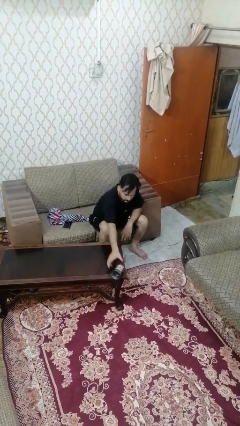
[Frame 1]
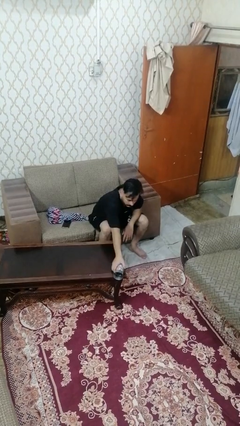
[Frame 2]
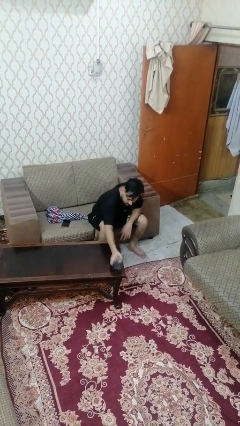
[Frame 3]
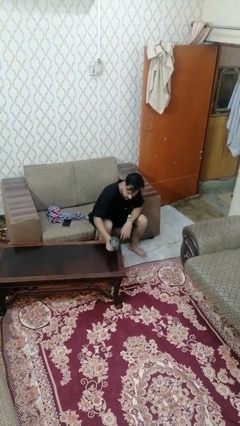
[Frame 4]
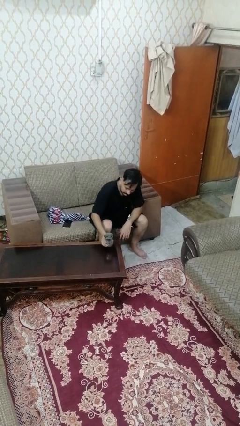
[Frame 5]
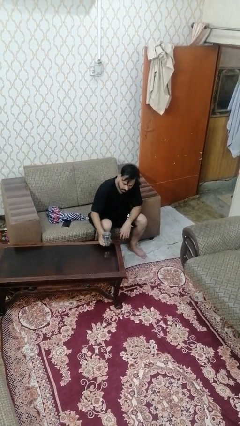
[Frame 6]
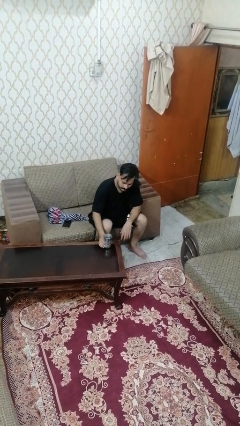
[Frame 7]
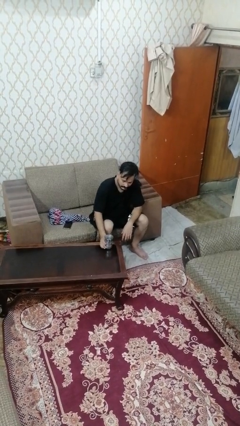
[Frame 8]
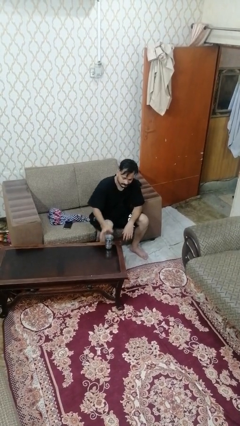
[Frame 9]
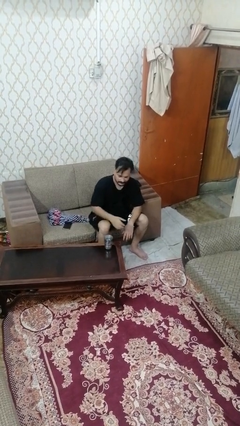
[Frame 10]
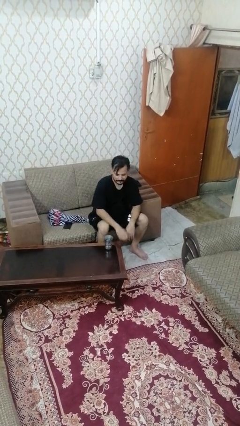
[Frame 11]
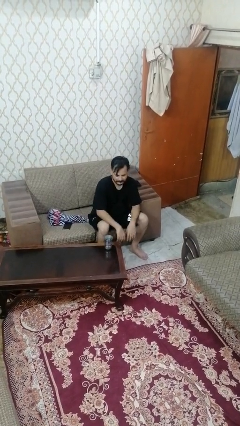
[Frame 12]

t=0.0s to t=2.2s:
person sets upright glass

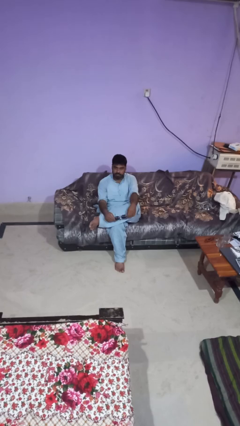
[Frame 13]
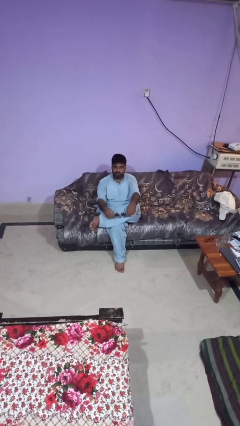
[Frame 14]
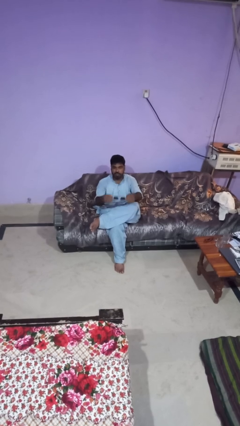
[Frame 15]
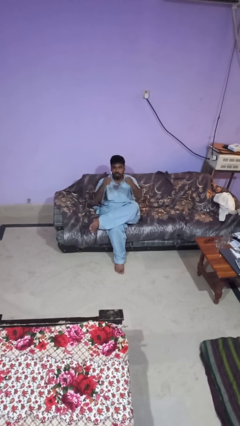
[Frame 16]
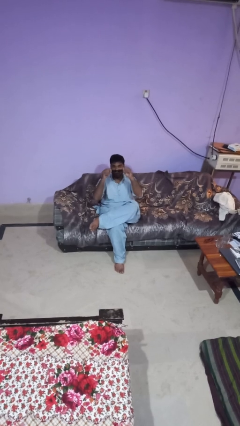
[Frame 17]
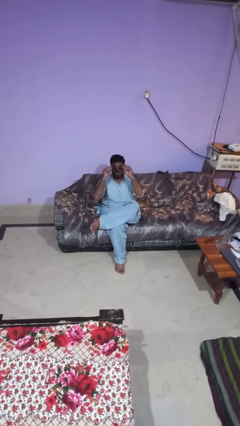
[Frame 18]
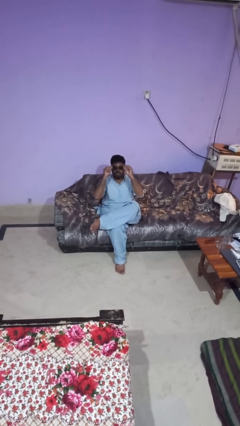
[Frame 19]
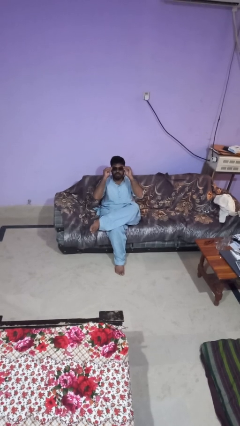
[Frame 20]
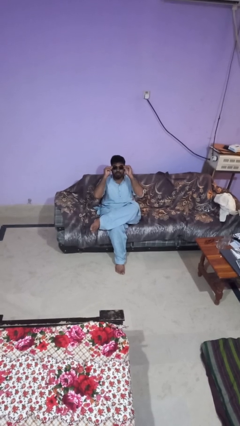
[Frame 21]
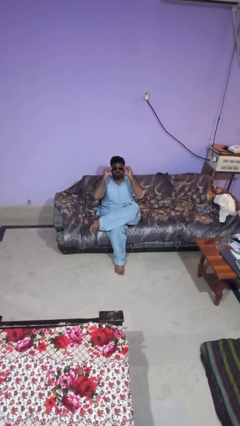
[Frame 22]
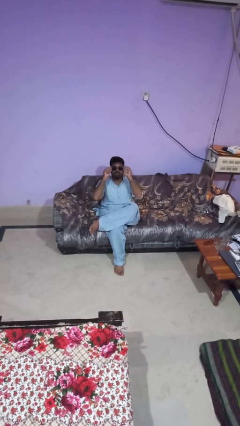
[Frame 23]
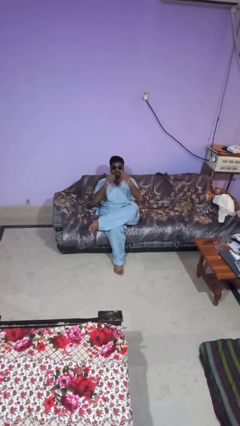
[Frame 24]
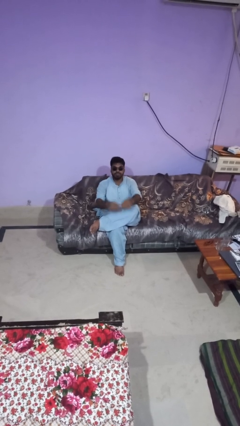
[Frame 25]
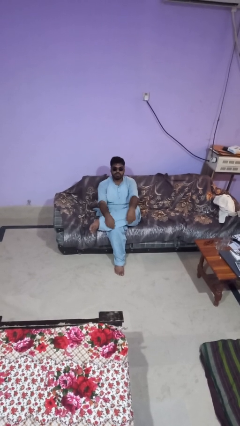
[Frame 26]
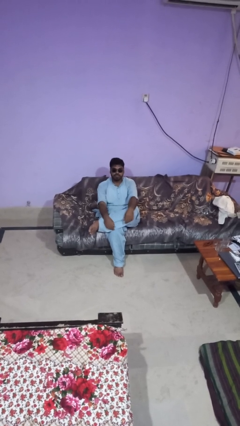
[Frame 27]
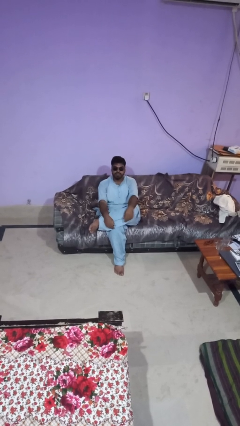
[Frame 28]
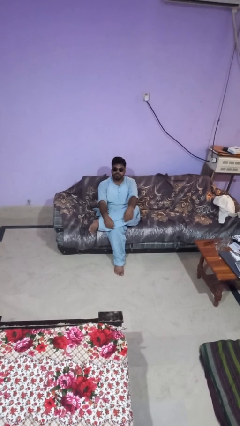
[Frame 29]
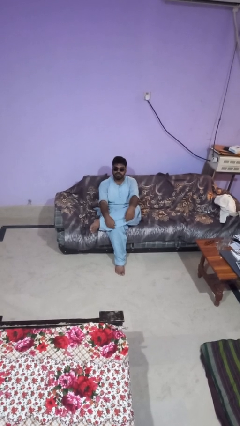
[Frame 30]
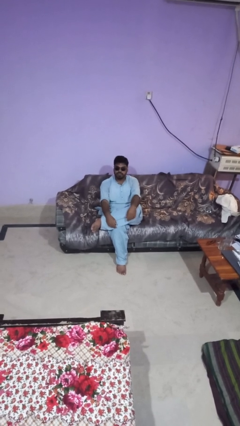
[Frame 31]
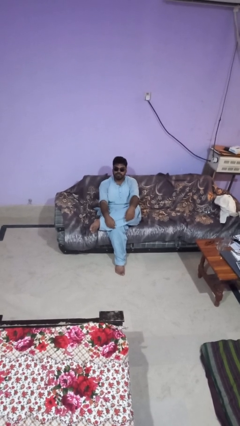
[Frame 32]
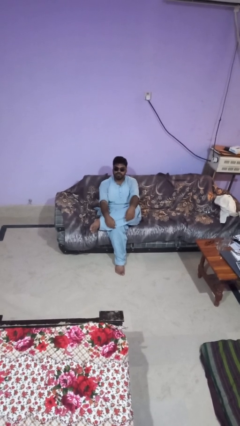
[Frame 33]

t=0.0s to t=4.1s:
person puts on sunglasses

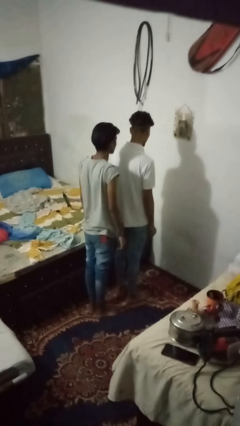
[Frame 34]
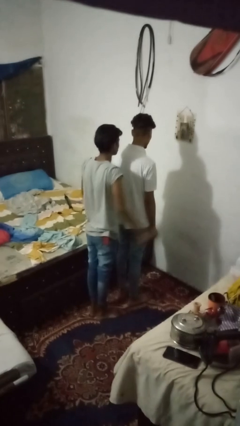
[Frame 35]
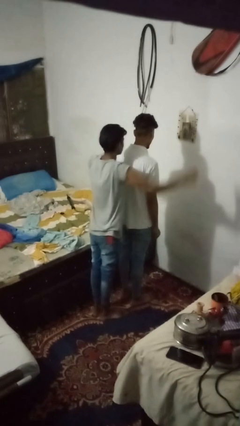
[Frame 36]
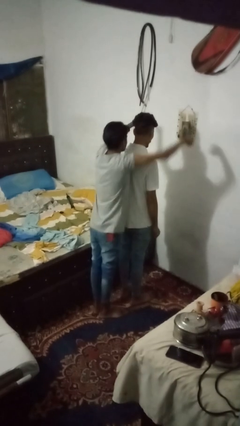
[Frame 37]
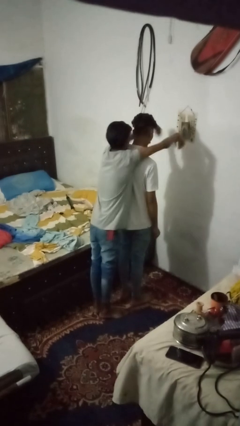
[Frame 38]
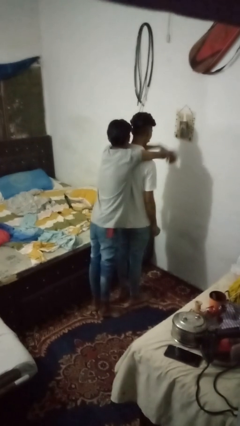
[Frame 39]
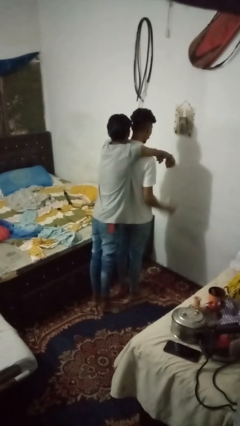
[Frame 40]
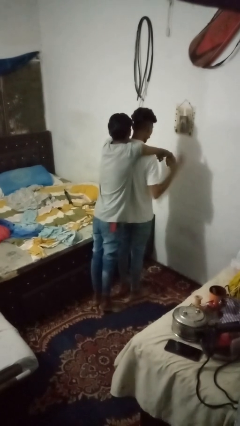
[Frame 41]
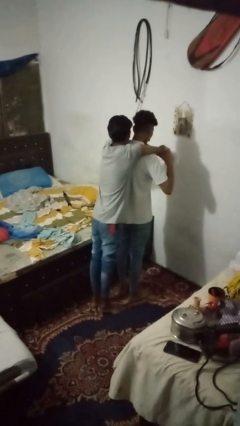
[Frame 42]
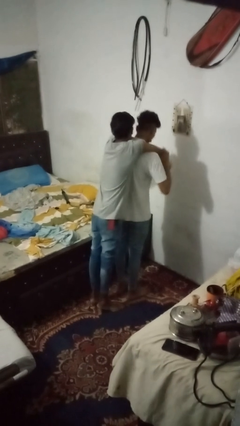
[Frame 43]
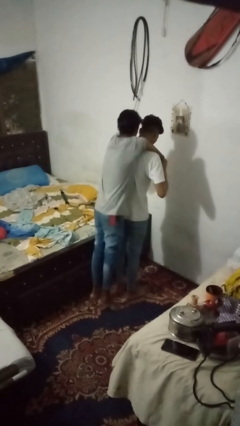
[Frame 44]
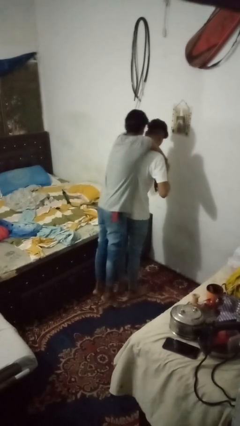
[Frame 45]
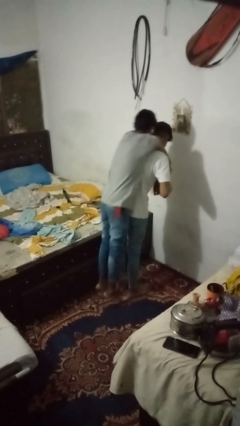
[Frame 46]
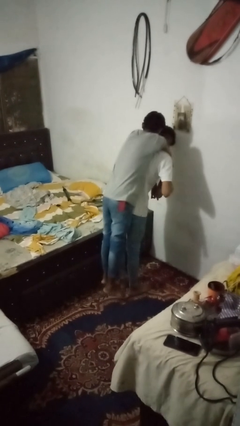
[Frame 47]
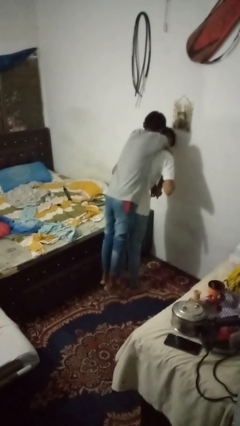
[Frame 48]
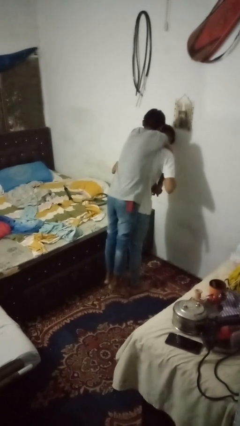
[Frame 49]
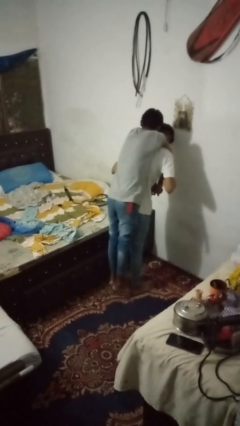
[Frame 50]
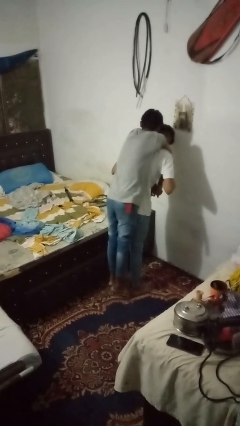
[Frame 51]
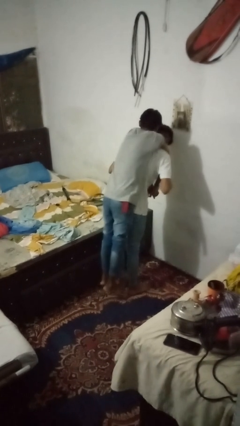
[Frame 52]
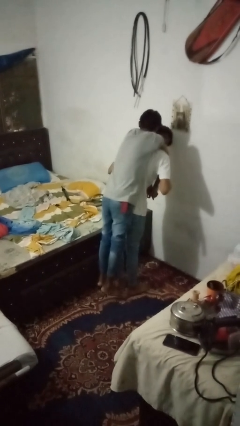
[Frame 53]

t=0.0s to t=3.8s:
person carries person on back

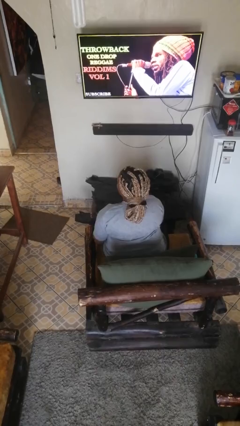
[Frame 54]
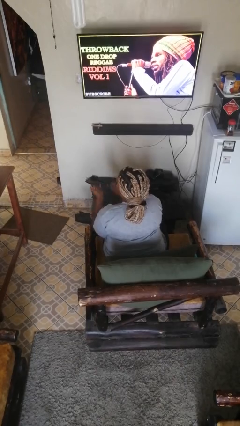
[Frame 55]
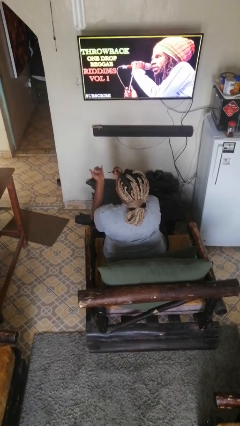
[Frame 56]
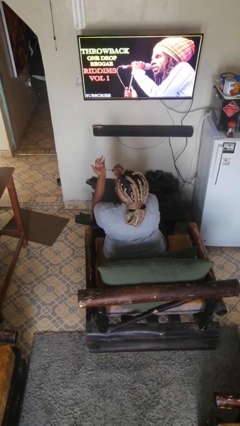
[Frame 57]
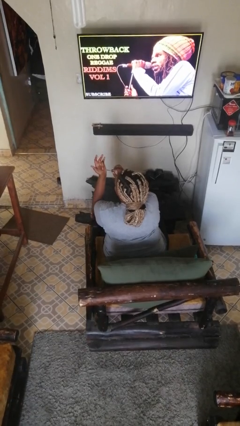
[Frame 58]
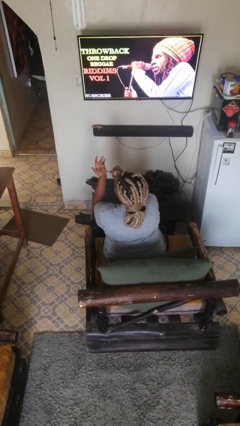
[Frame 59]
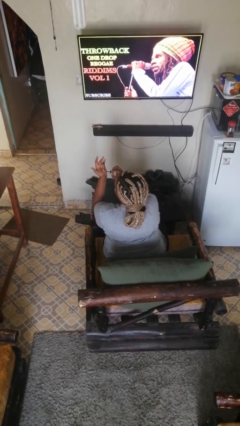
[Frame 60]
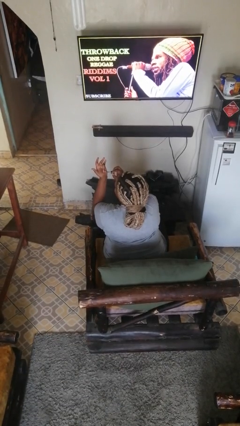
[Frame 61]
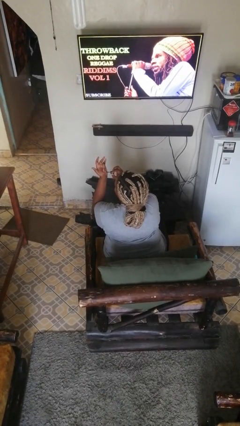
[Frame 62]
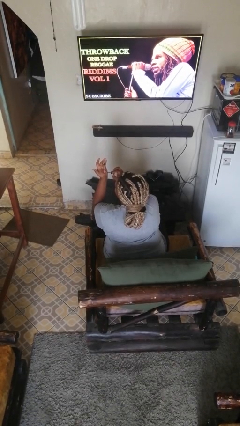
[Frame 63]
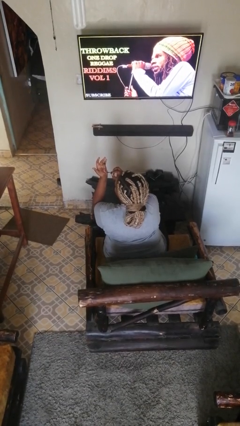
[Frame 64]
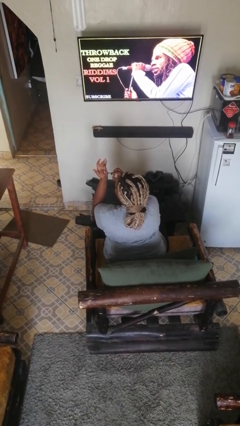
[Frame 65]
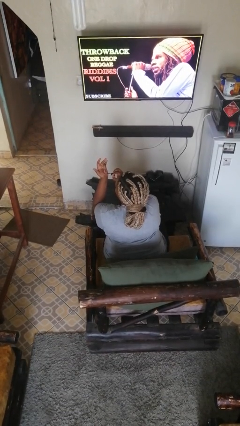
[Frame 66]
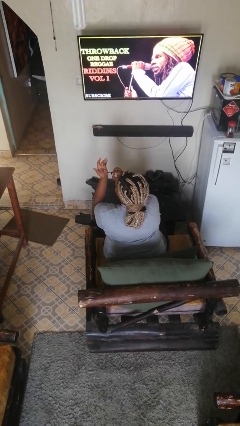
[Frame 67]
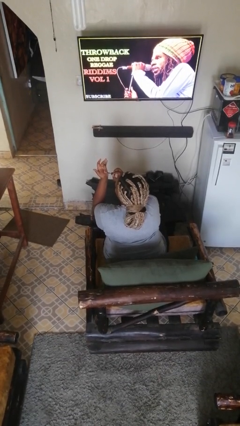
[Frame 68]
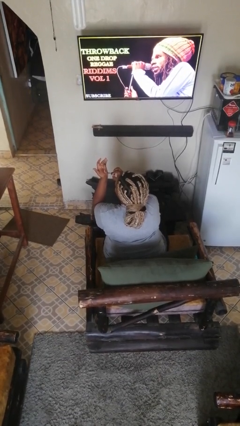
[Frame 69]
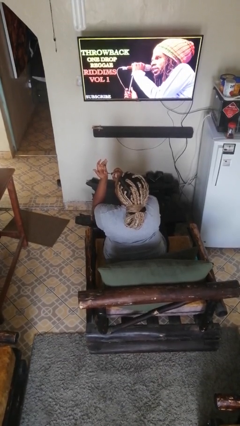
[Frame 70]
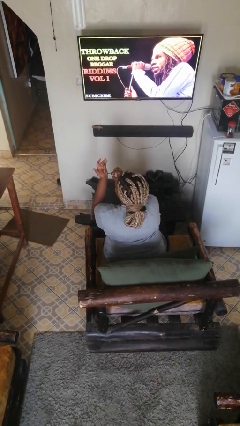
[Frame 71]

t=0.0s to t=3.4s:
person paints fingernails

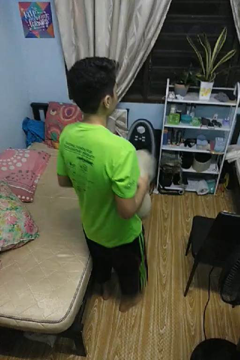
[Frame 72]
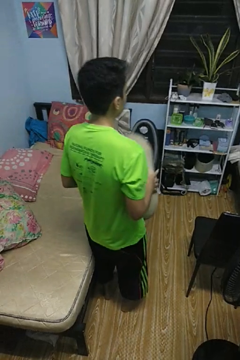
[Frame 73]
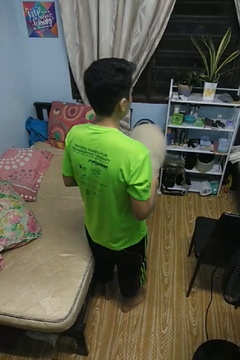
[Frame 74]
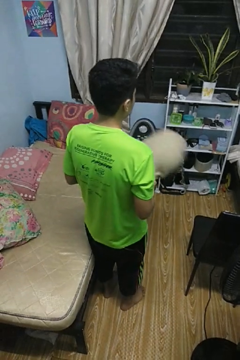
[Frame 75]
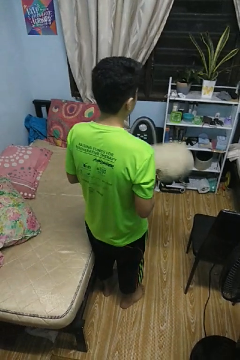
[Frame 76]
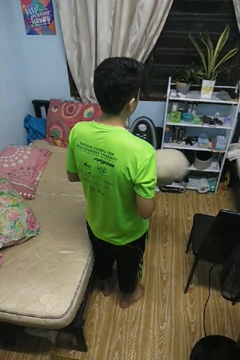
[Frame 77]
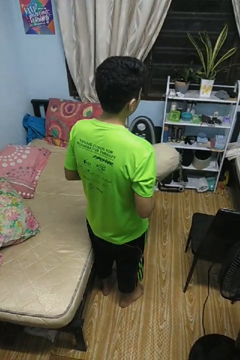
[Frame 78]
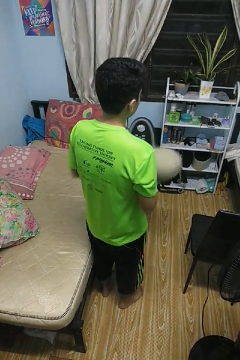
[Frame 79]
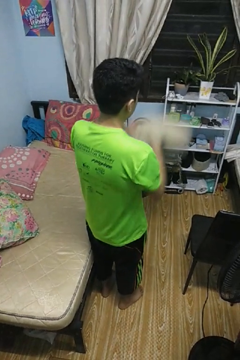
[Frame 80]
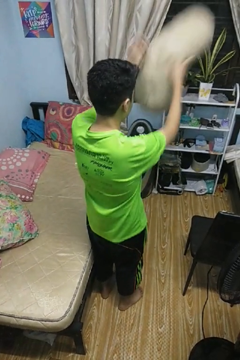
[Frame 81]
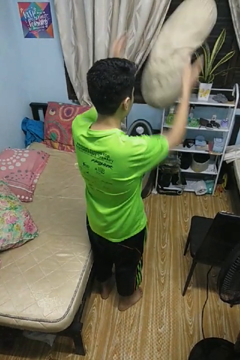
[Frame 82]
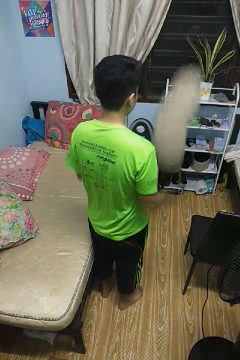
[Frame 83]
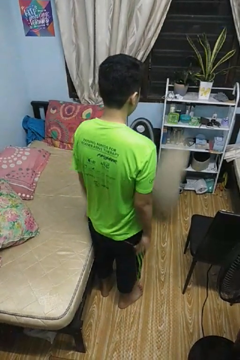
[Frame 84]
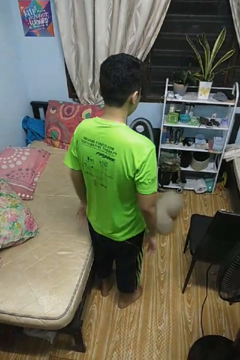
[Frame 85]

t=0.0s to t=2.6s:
person throws object into air

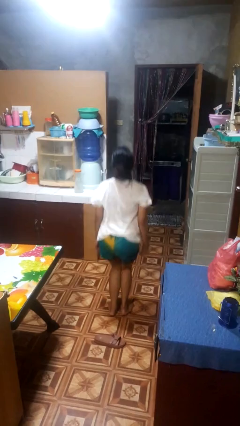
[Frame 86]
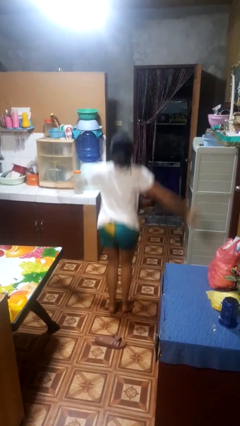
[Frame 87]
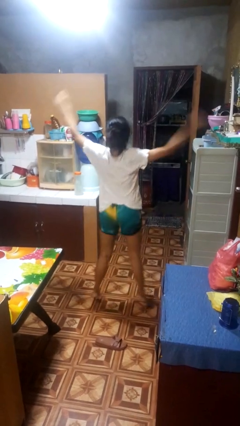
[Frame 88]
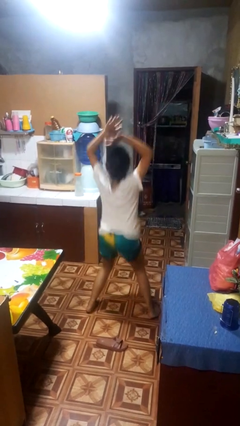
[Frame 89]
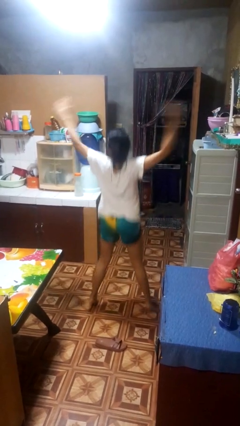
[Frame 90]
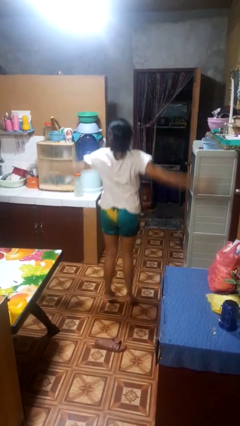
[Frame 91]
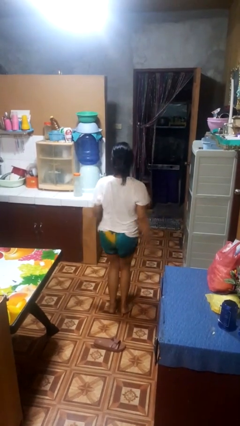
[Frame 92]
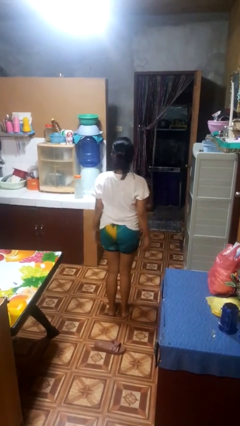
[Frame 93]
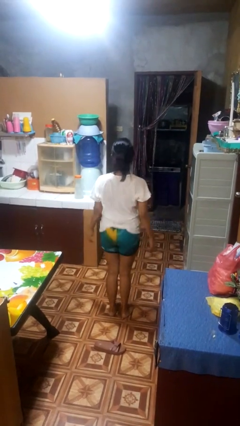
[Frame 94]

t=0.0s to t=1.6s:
person exercises with jumping jacks
